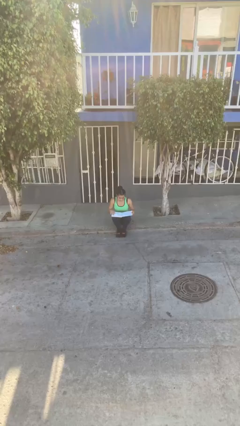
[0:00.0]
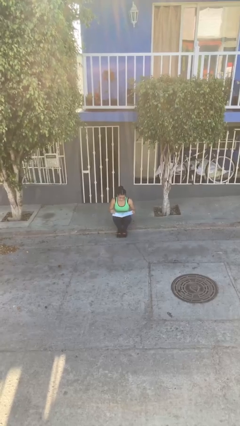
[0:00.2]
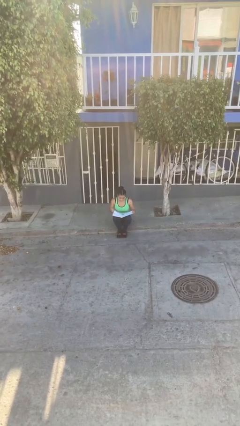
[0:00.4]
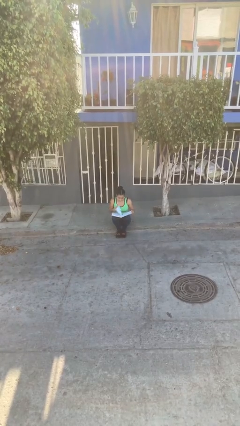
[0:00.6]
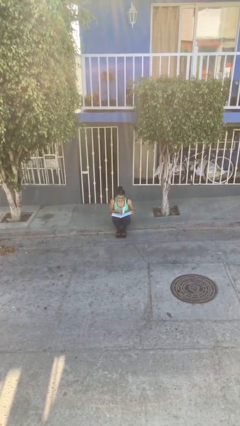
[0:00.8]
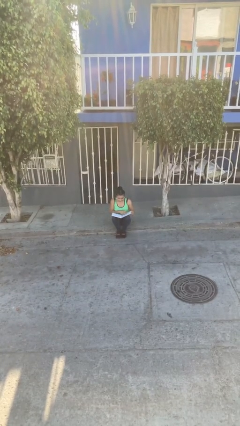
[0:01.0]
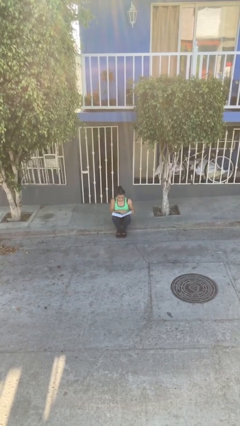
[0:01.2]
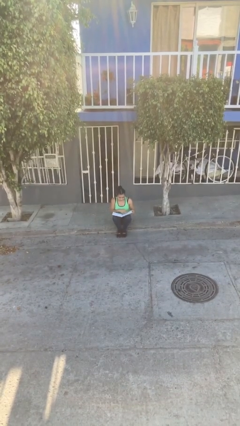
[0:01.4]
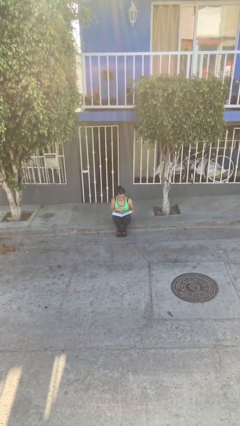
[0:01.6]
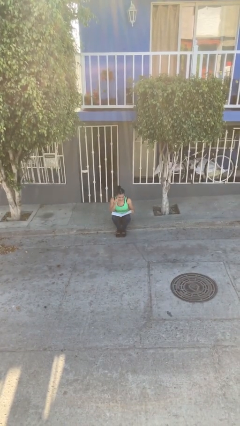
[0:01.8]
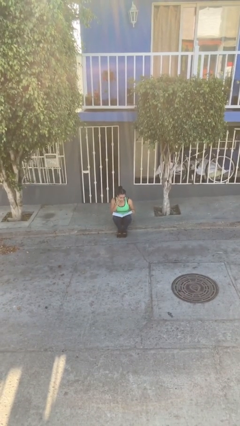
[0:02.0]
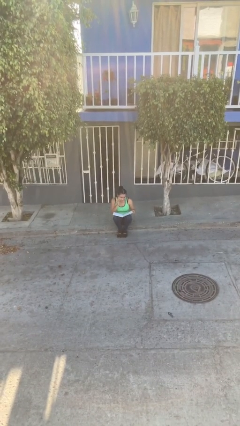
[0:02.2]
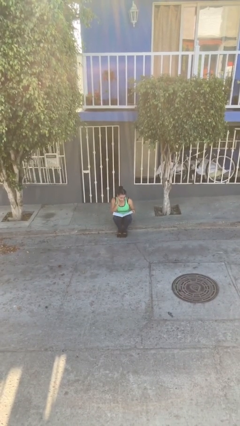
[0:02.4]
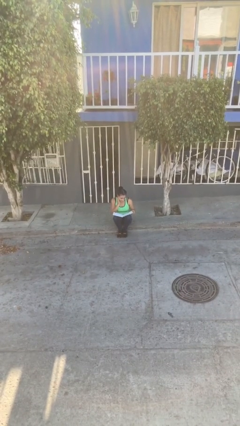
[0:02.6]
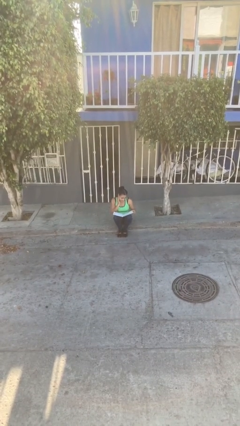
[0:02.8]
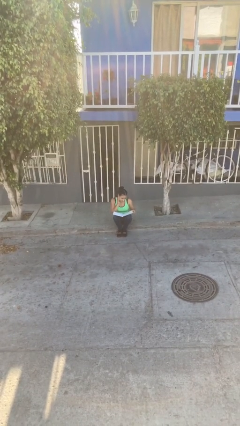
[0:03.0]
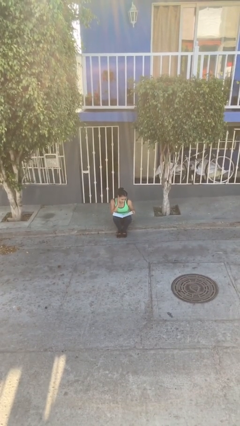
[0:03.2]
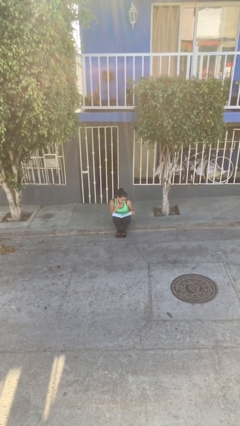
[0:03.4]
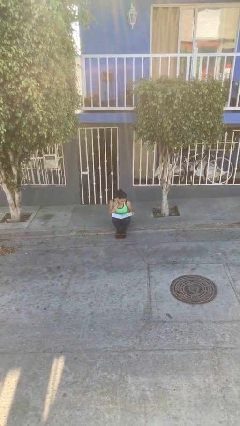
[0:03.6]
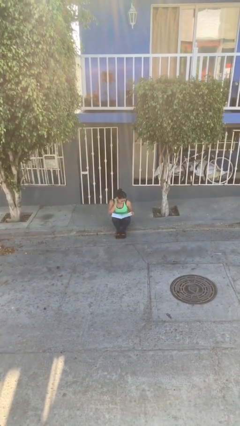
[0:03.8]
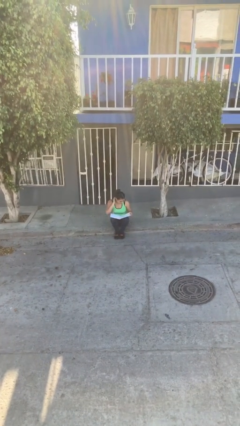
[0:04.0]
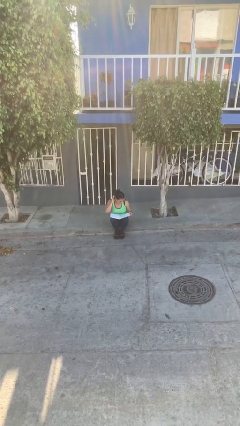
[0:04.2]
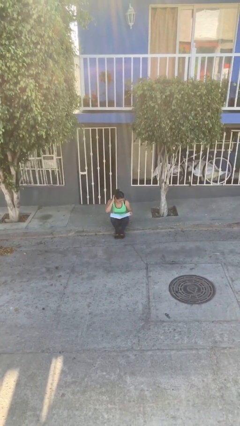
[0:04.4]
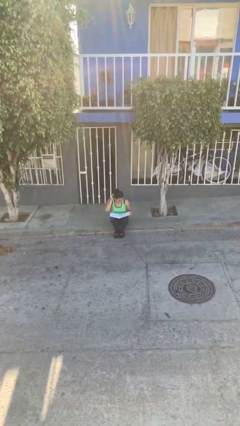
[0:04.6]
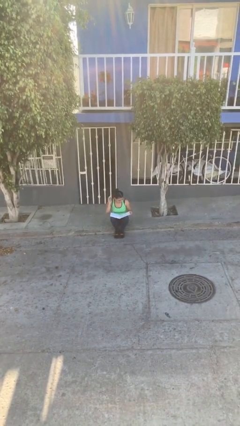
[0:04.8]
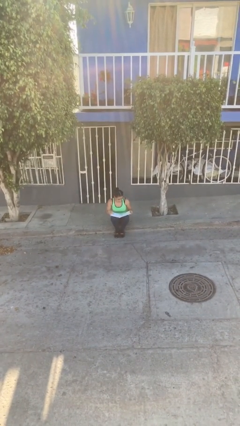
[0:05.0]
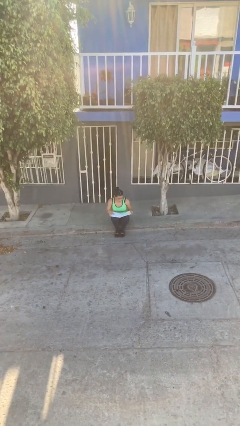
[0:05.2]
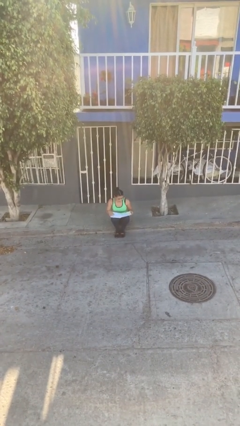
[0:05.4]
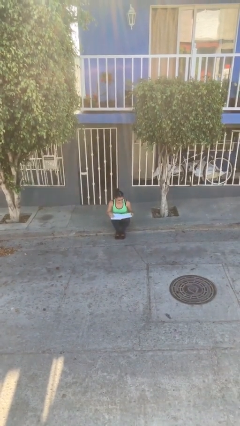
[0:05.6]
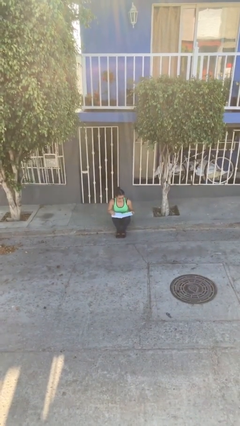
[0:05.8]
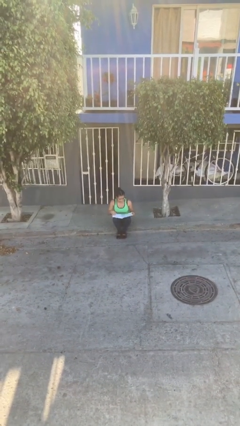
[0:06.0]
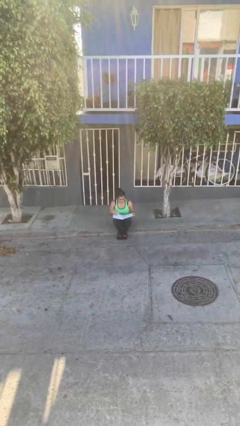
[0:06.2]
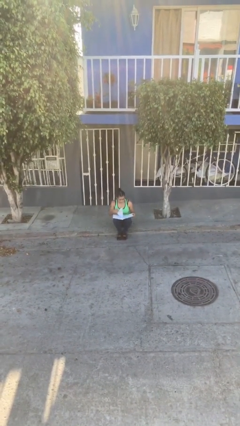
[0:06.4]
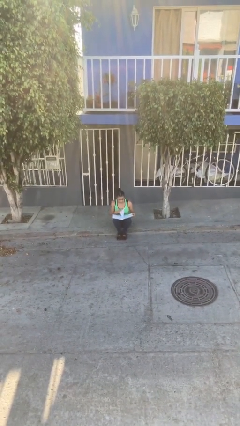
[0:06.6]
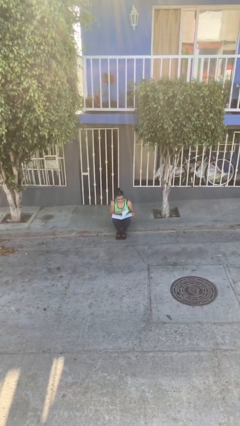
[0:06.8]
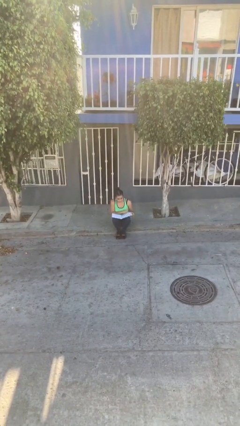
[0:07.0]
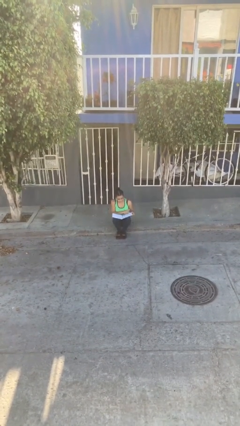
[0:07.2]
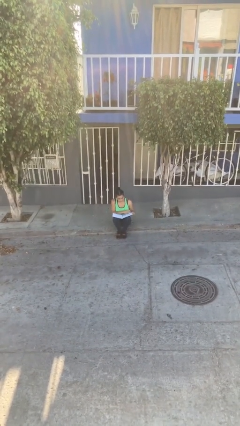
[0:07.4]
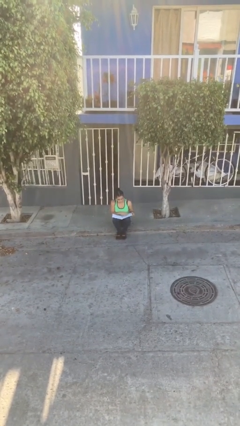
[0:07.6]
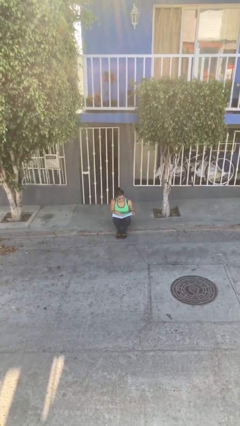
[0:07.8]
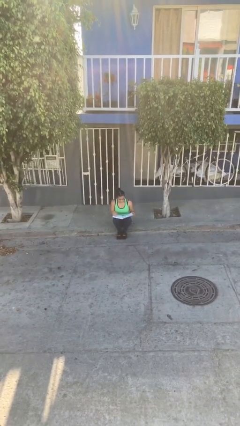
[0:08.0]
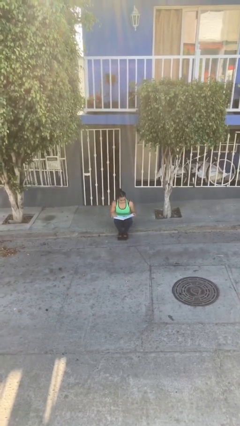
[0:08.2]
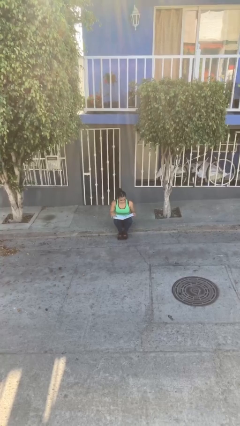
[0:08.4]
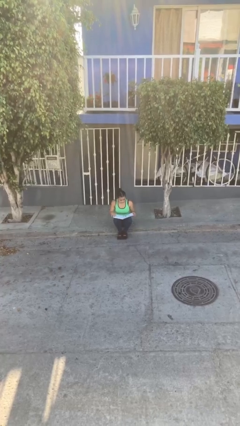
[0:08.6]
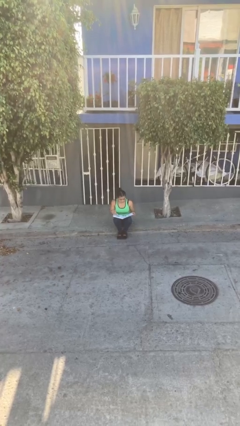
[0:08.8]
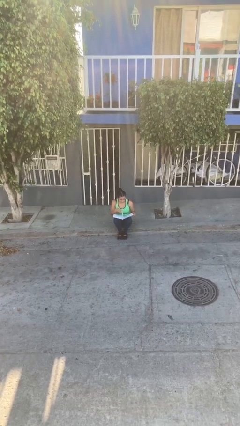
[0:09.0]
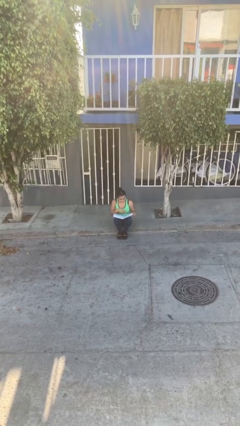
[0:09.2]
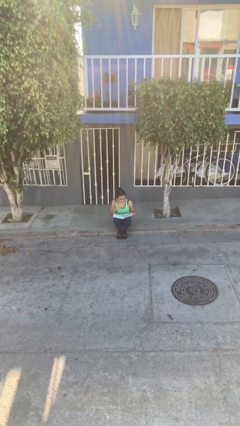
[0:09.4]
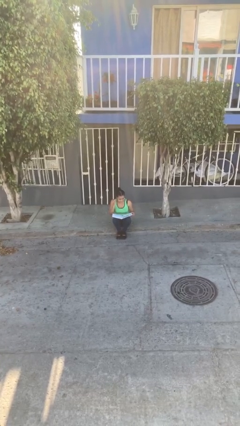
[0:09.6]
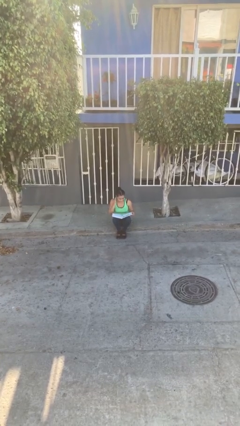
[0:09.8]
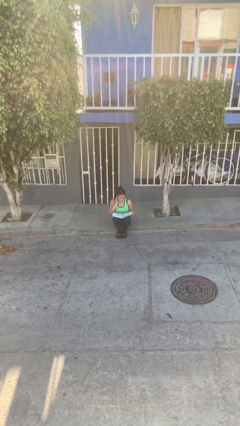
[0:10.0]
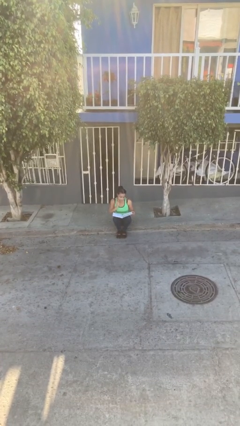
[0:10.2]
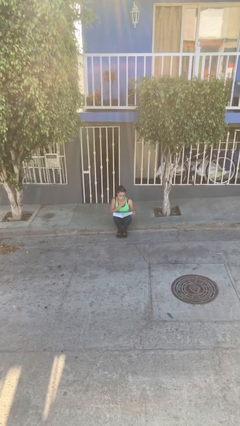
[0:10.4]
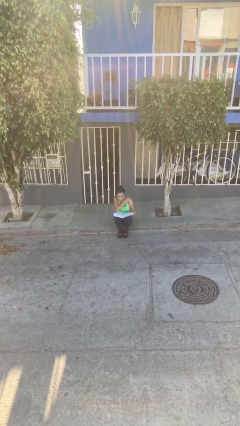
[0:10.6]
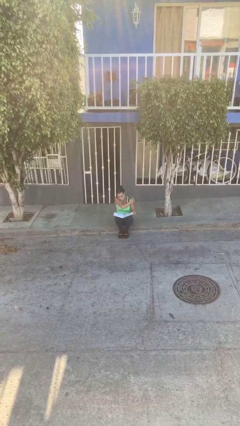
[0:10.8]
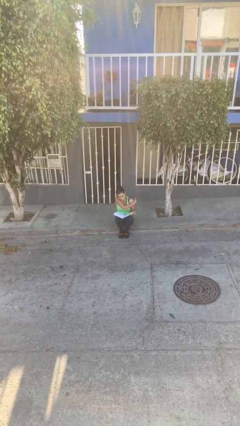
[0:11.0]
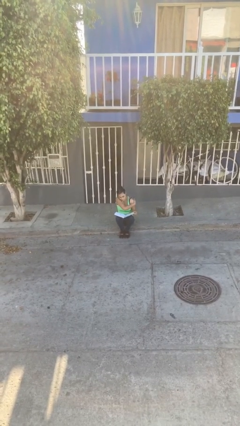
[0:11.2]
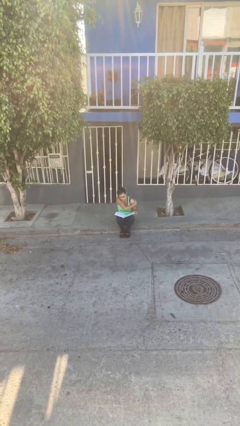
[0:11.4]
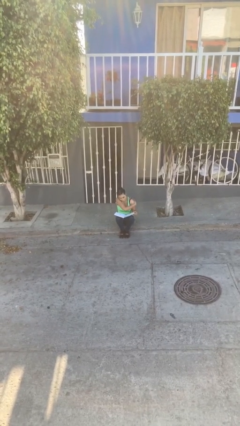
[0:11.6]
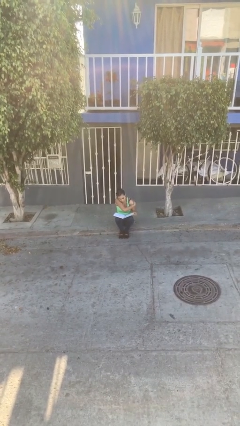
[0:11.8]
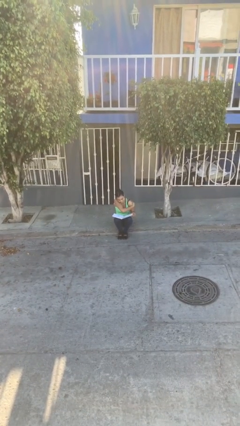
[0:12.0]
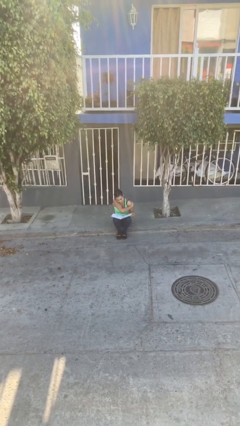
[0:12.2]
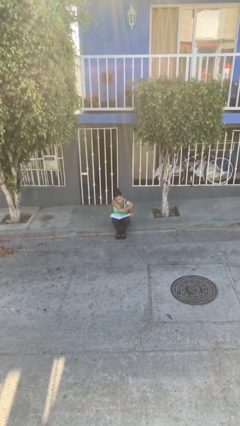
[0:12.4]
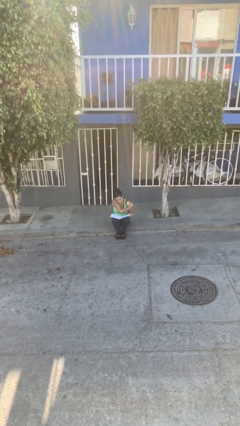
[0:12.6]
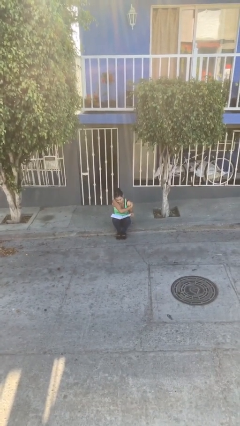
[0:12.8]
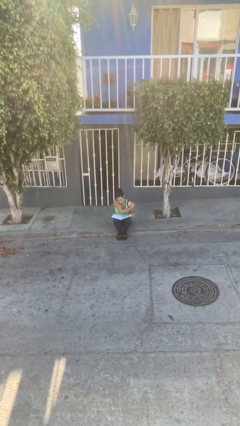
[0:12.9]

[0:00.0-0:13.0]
person reads document

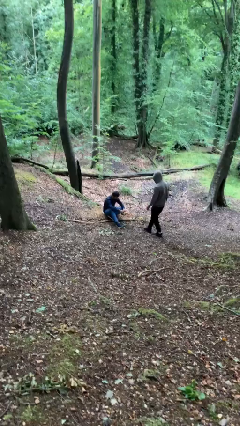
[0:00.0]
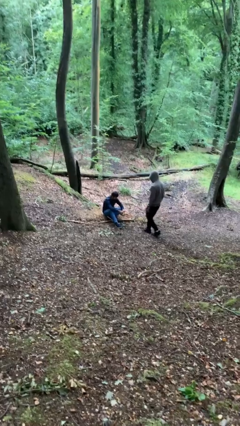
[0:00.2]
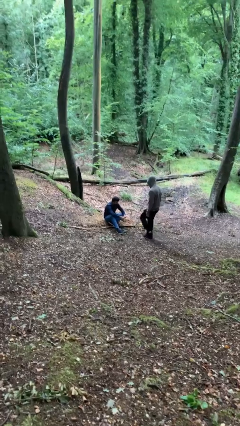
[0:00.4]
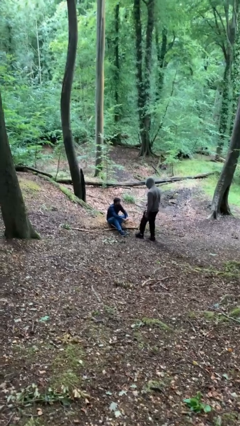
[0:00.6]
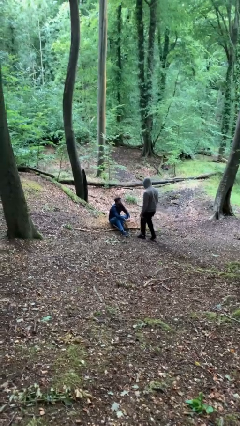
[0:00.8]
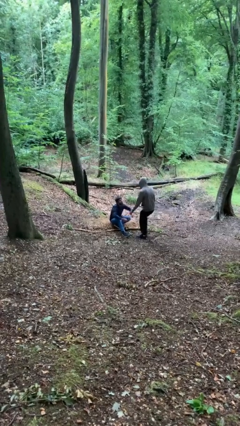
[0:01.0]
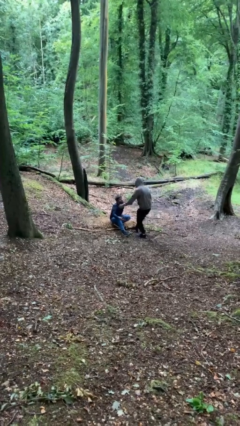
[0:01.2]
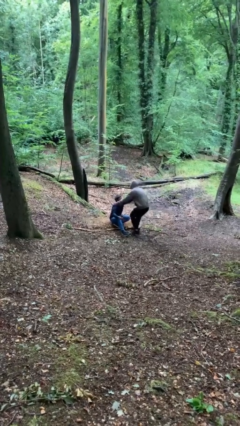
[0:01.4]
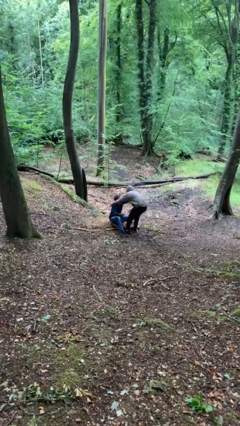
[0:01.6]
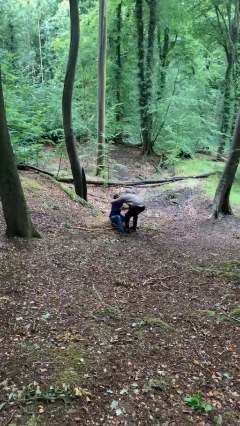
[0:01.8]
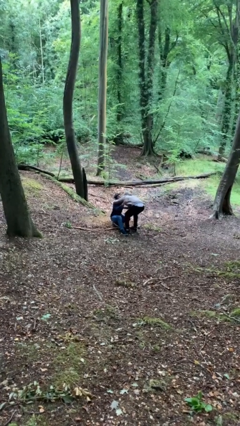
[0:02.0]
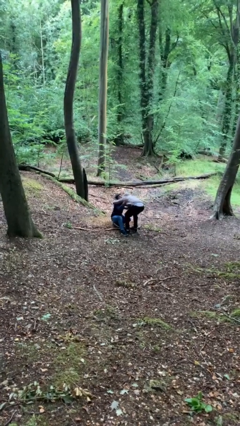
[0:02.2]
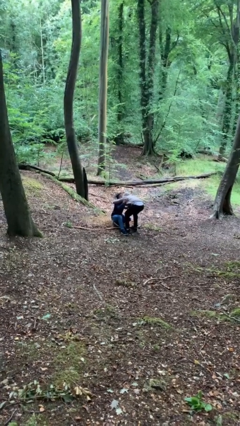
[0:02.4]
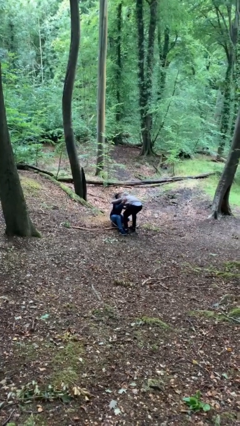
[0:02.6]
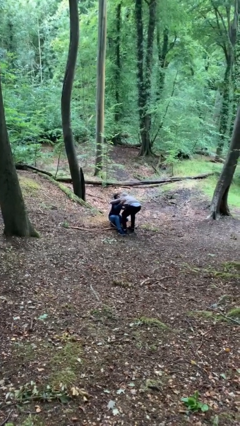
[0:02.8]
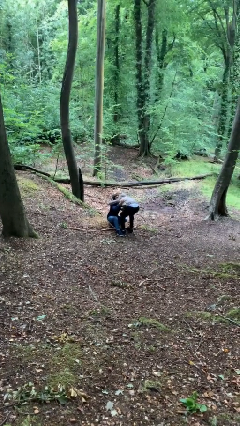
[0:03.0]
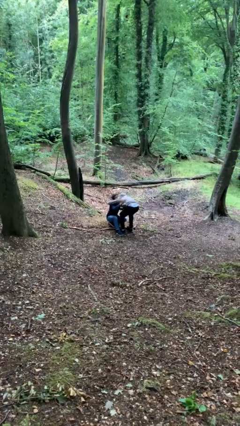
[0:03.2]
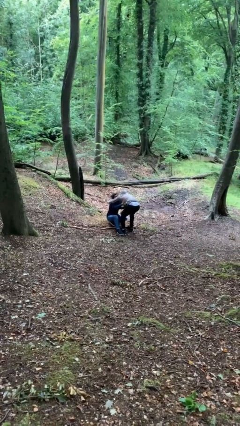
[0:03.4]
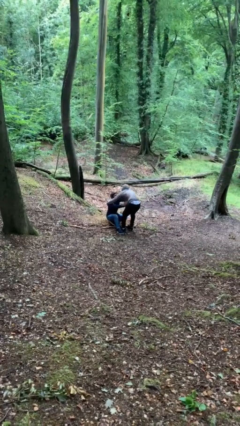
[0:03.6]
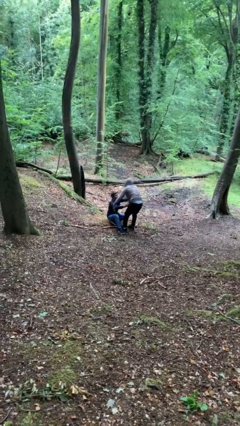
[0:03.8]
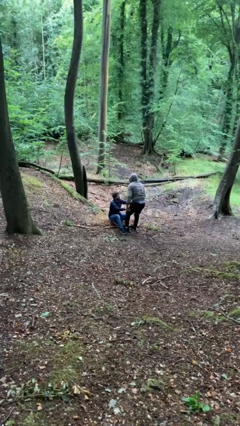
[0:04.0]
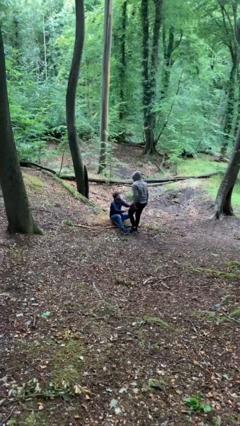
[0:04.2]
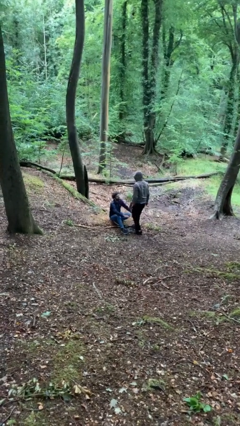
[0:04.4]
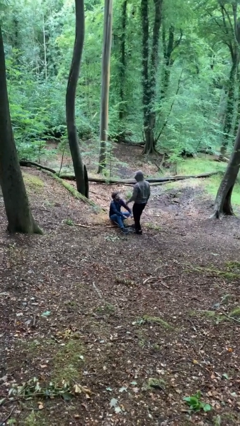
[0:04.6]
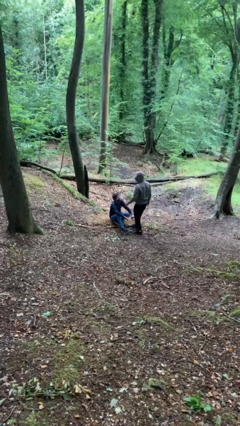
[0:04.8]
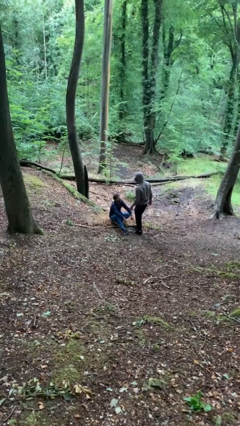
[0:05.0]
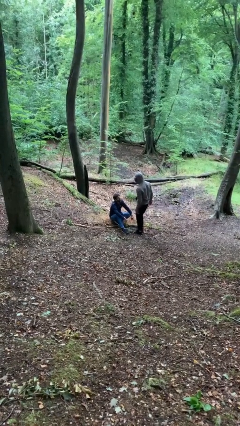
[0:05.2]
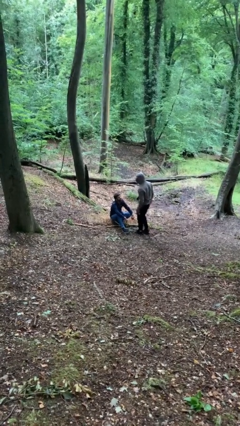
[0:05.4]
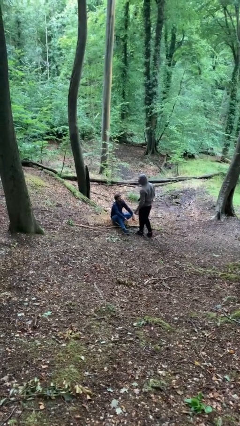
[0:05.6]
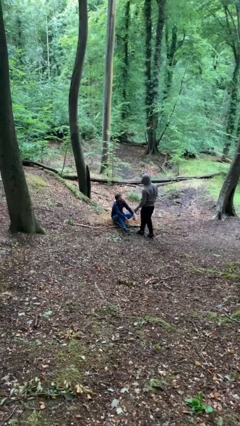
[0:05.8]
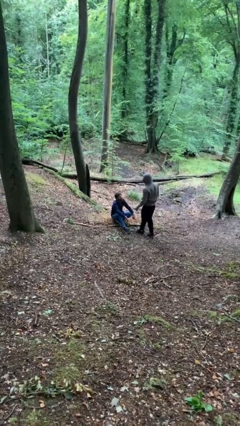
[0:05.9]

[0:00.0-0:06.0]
person embraces person
